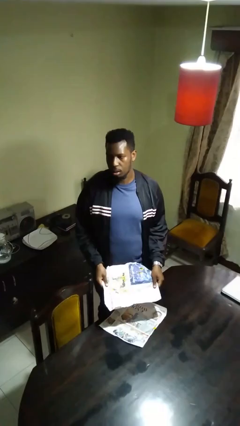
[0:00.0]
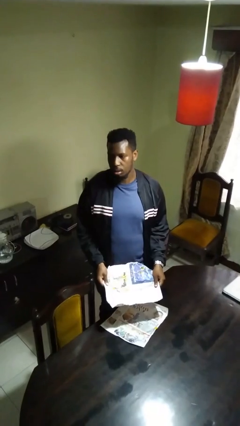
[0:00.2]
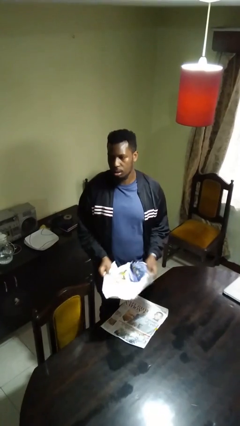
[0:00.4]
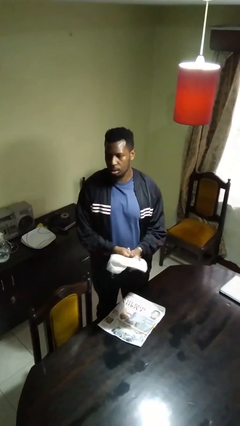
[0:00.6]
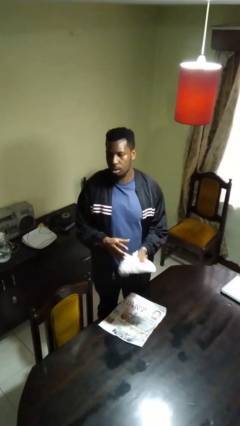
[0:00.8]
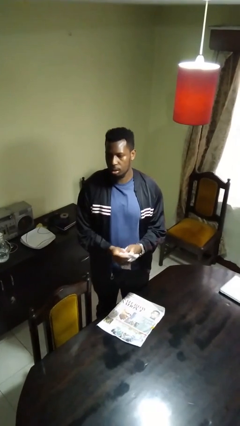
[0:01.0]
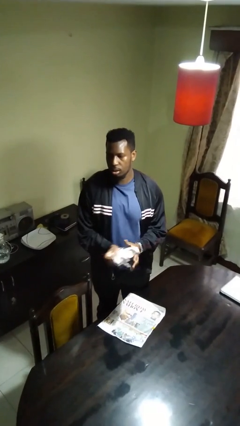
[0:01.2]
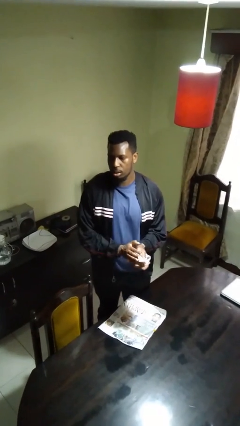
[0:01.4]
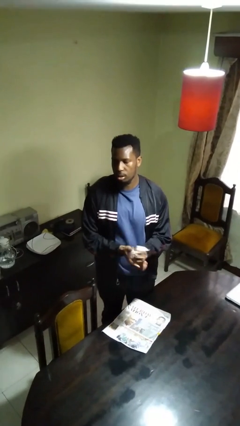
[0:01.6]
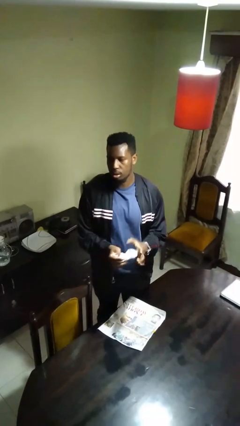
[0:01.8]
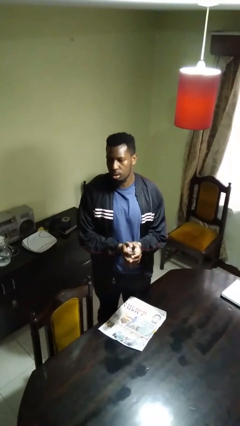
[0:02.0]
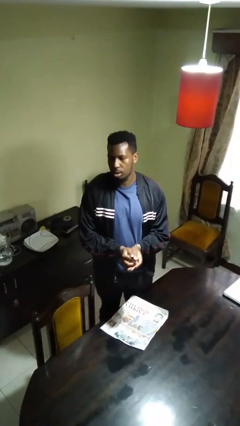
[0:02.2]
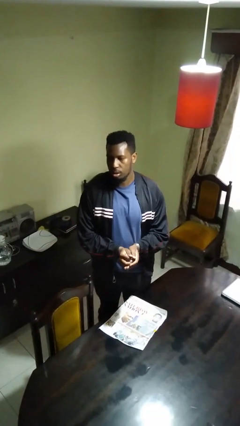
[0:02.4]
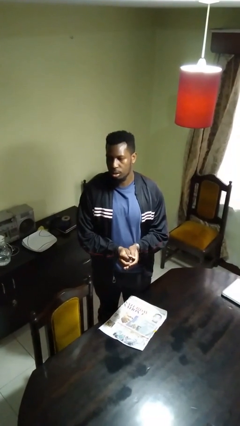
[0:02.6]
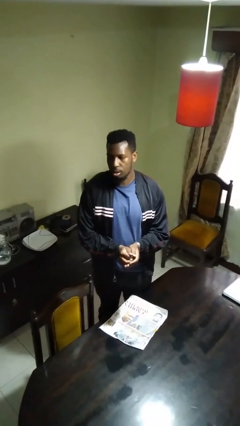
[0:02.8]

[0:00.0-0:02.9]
person crumples paper

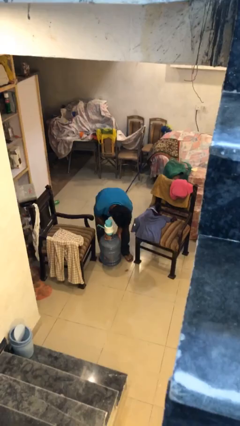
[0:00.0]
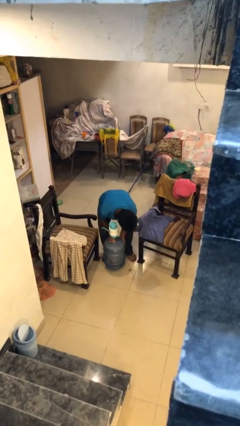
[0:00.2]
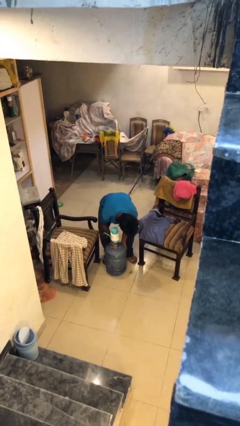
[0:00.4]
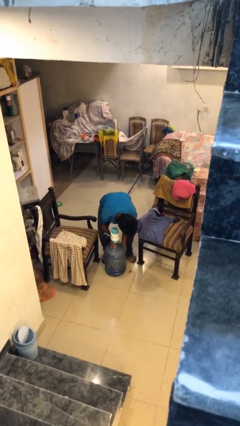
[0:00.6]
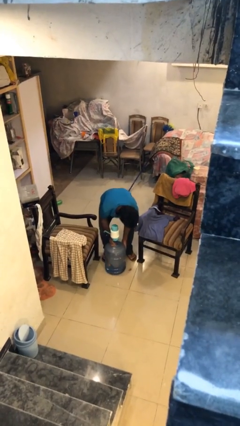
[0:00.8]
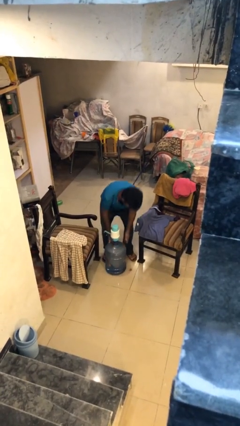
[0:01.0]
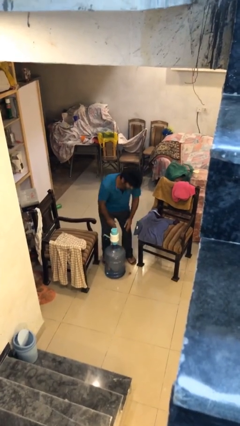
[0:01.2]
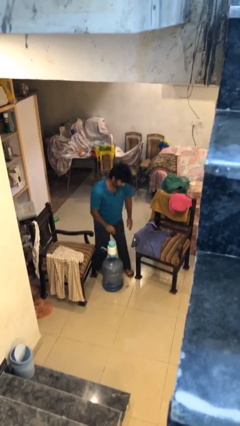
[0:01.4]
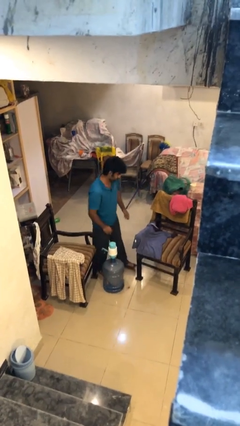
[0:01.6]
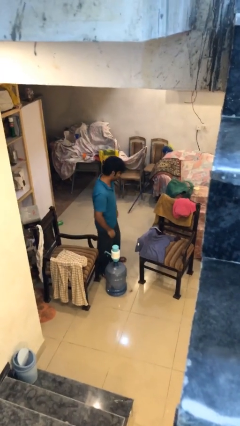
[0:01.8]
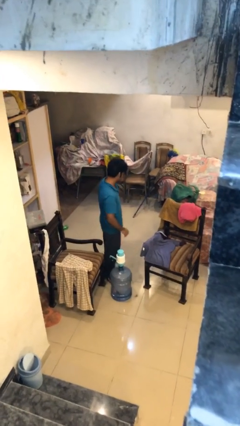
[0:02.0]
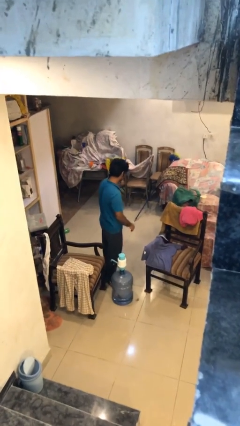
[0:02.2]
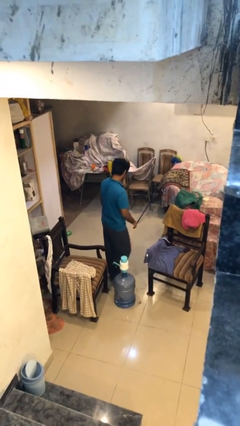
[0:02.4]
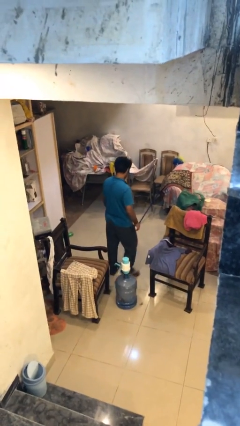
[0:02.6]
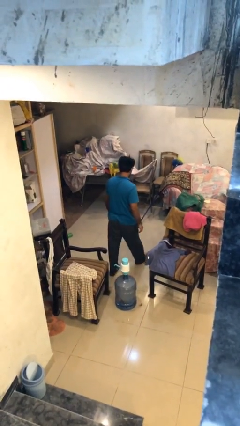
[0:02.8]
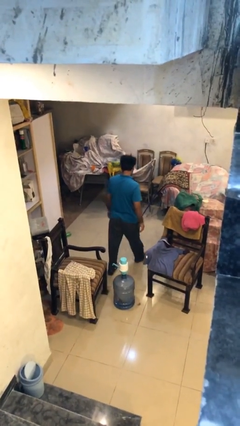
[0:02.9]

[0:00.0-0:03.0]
person puts down object on floor

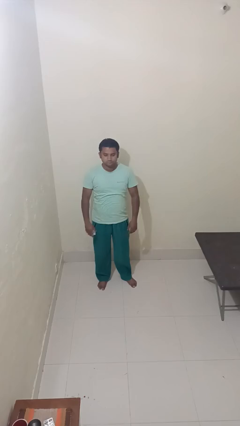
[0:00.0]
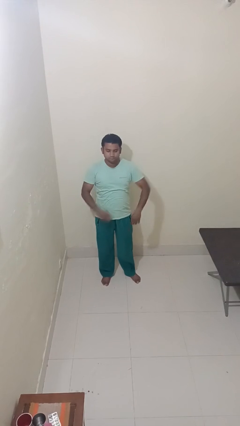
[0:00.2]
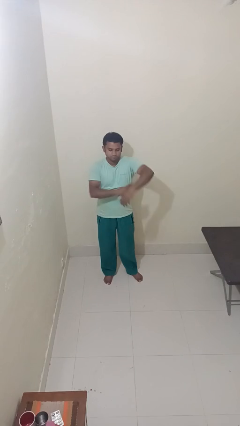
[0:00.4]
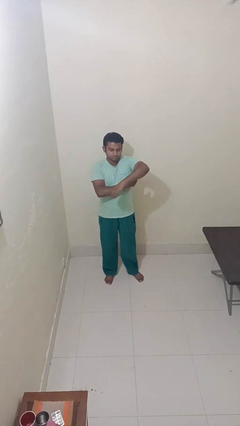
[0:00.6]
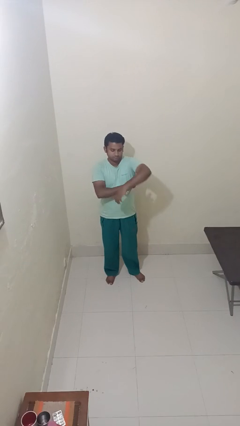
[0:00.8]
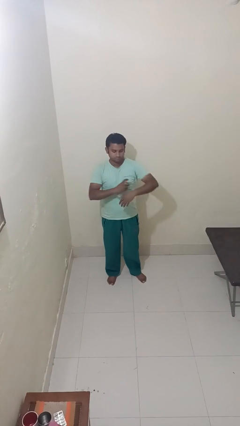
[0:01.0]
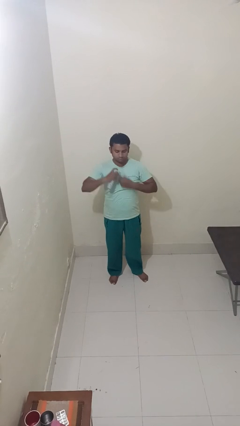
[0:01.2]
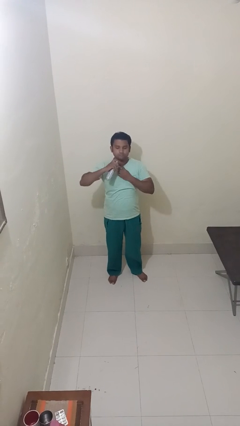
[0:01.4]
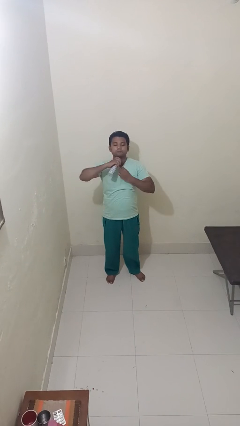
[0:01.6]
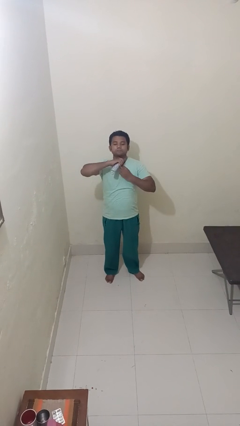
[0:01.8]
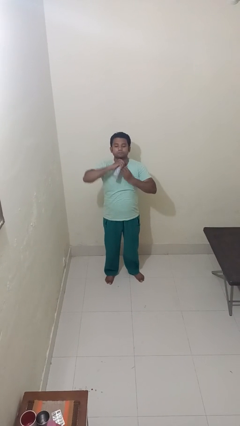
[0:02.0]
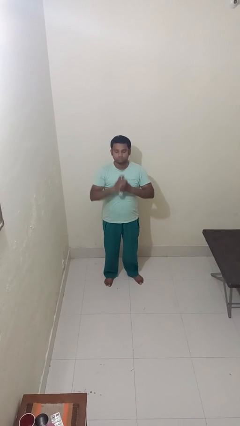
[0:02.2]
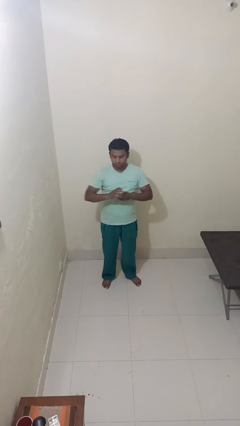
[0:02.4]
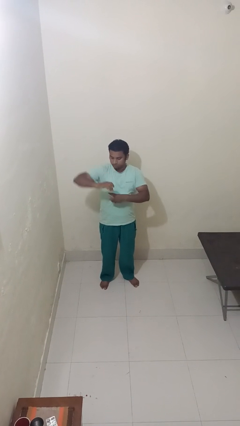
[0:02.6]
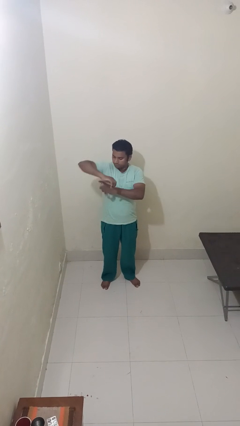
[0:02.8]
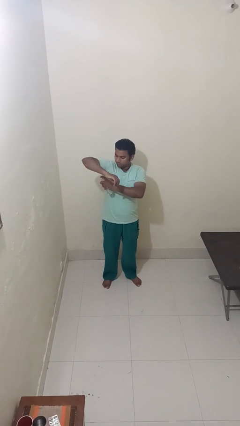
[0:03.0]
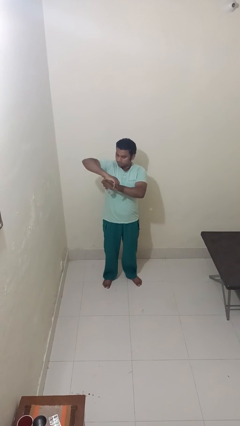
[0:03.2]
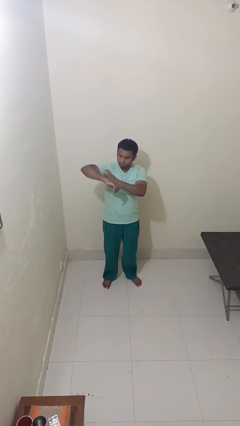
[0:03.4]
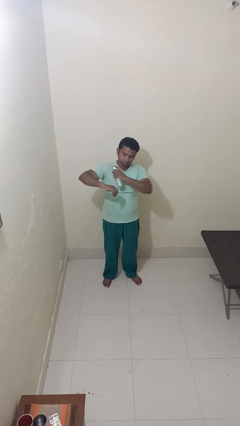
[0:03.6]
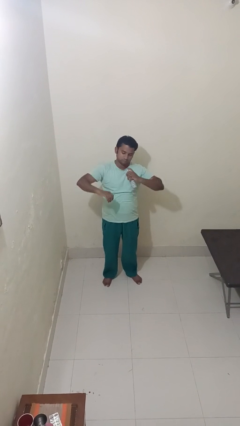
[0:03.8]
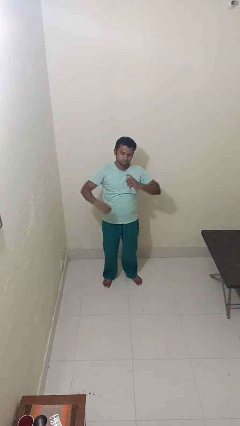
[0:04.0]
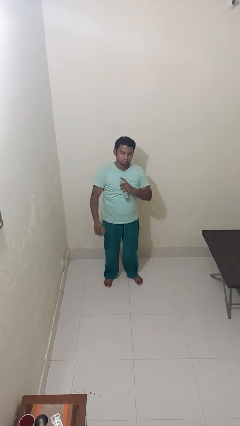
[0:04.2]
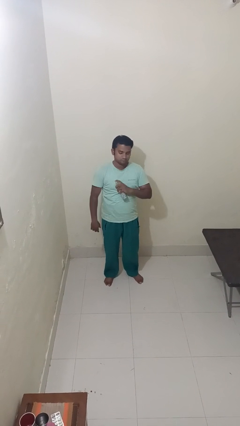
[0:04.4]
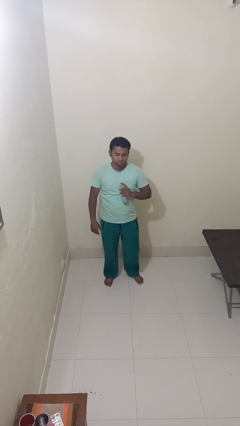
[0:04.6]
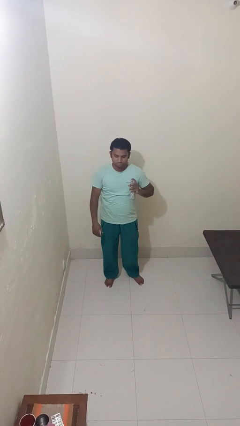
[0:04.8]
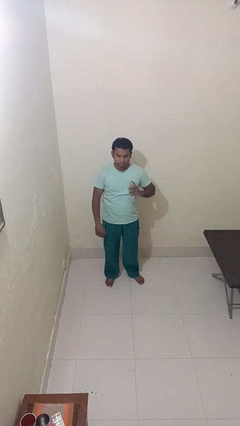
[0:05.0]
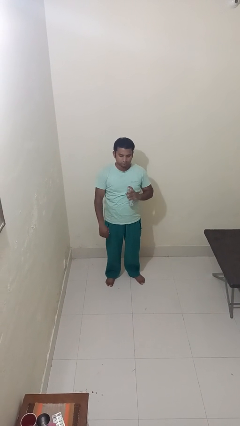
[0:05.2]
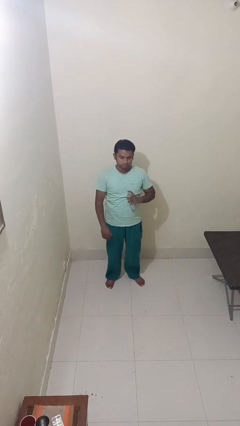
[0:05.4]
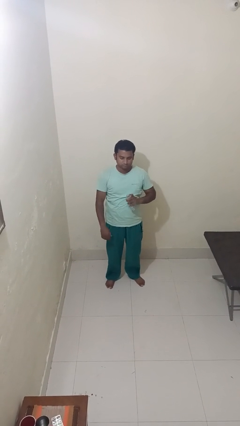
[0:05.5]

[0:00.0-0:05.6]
person applies deodorant

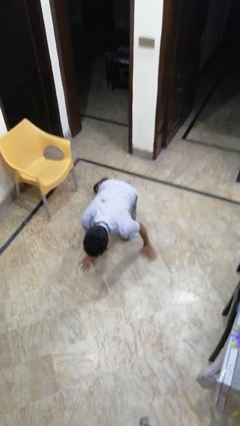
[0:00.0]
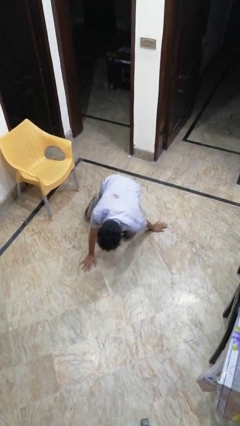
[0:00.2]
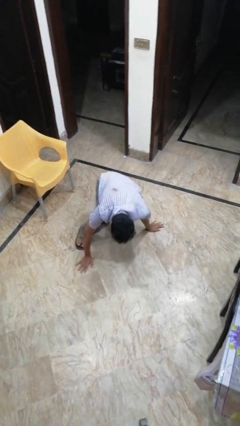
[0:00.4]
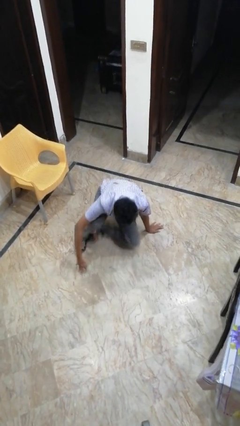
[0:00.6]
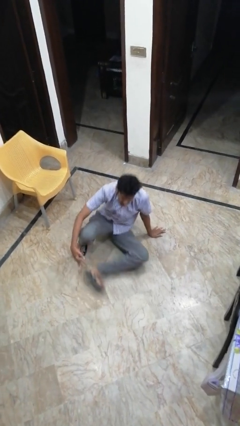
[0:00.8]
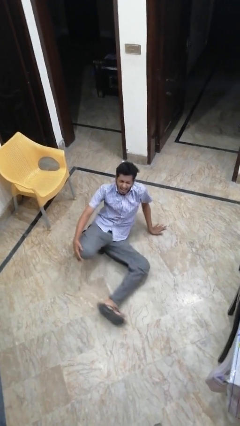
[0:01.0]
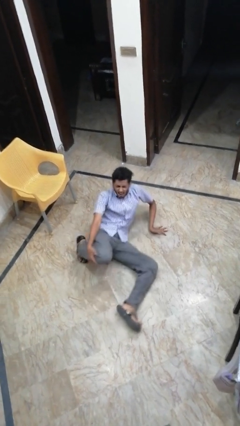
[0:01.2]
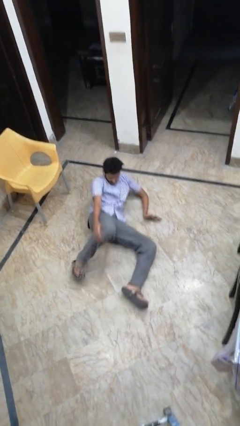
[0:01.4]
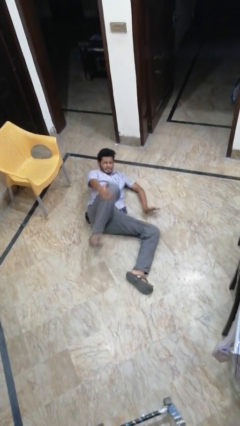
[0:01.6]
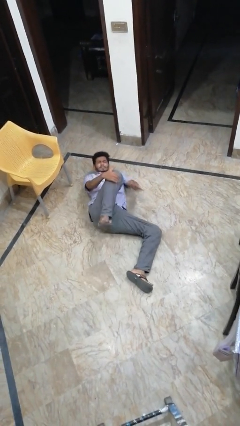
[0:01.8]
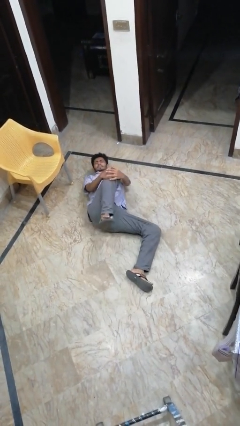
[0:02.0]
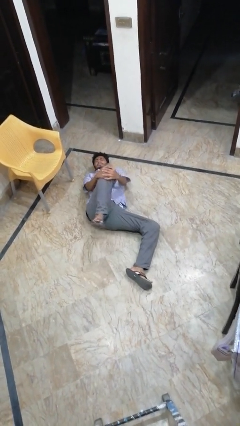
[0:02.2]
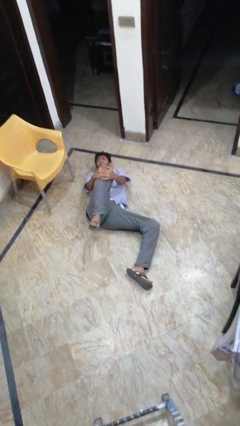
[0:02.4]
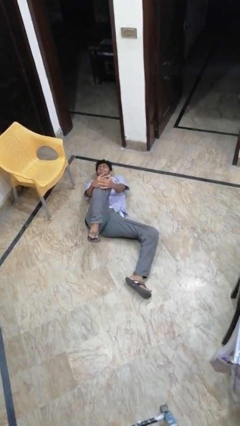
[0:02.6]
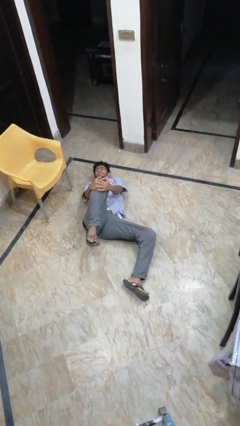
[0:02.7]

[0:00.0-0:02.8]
person lies down on floor

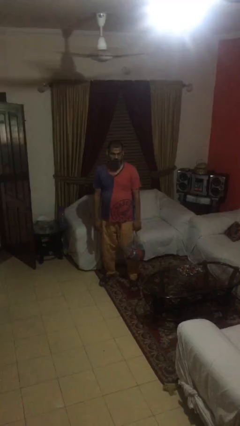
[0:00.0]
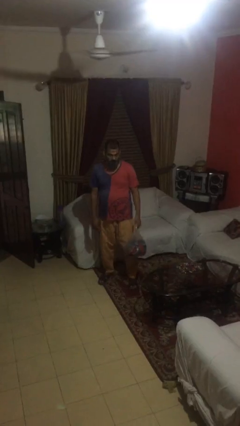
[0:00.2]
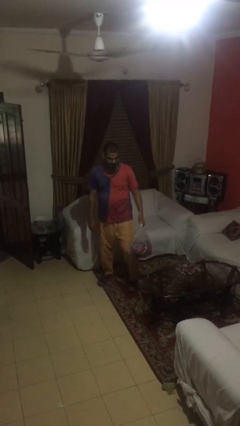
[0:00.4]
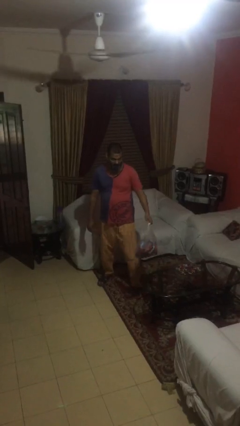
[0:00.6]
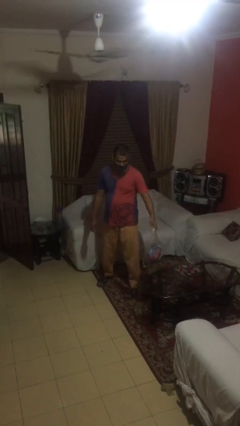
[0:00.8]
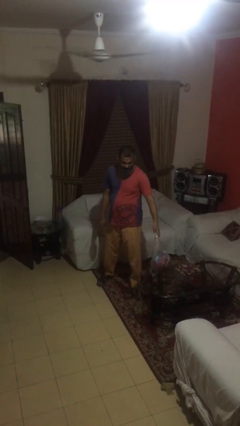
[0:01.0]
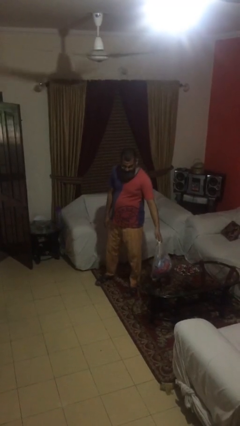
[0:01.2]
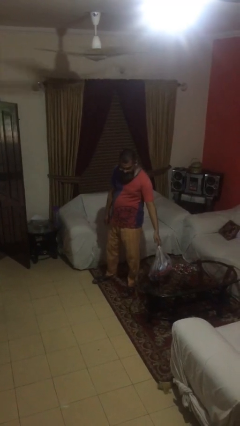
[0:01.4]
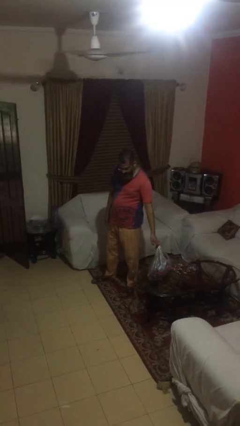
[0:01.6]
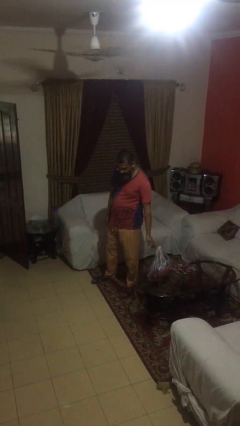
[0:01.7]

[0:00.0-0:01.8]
person puts down object on table

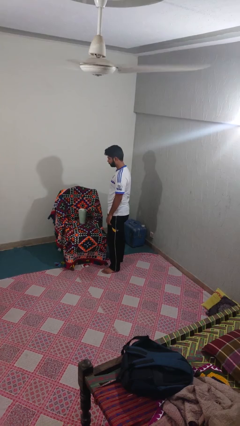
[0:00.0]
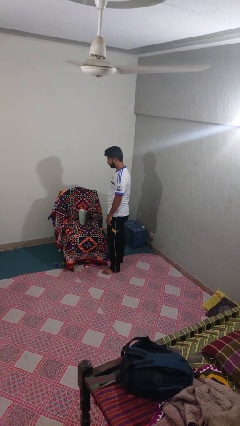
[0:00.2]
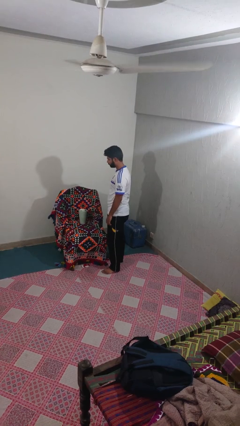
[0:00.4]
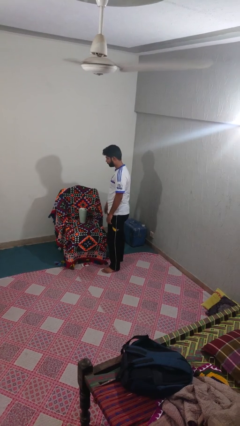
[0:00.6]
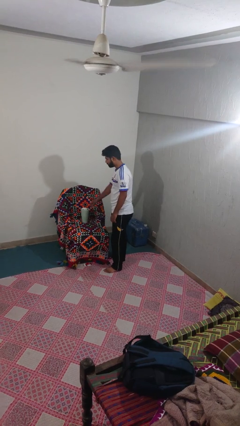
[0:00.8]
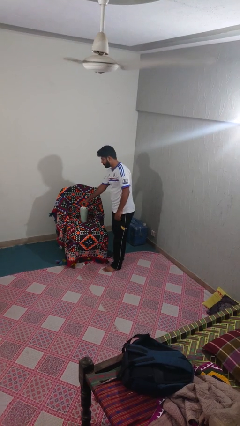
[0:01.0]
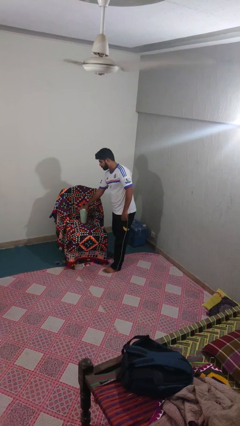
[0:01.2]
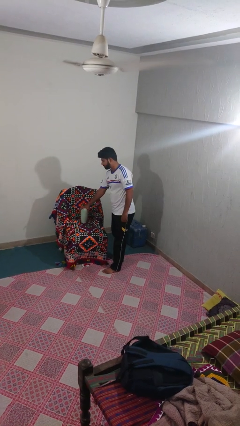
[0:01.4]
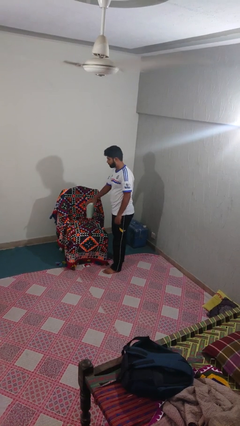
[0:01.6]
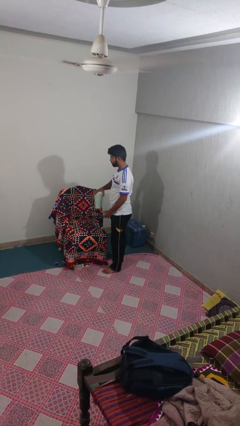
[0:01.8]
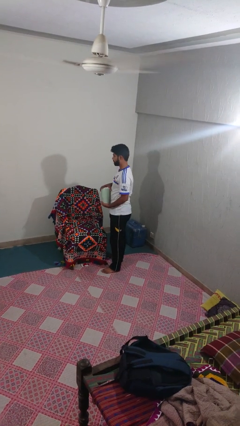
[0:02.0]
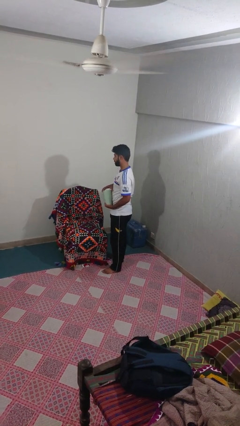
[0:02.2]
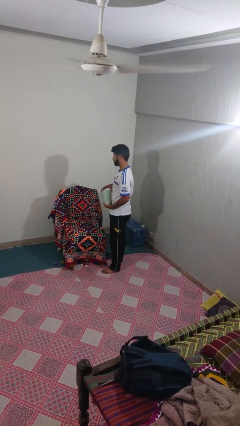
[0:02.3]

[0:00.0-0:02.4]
person picks up object from couch
